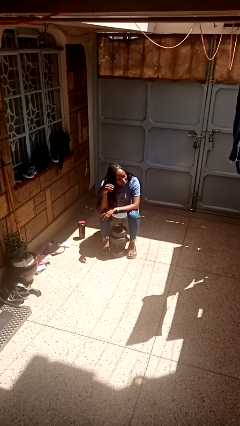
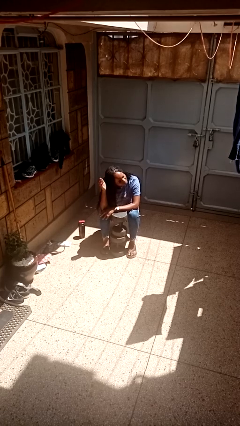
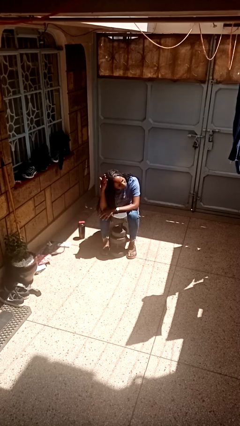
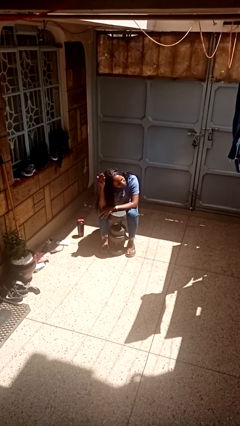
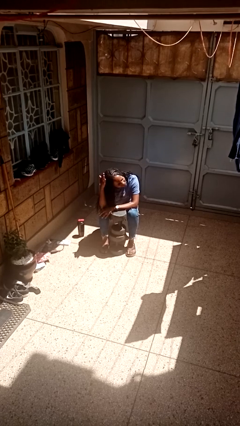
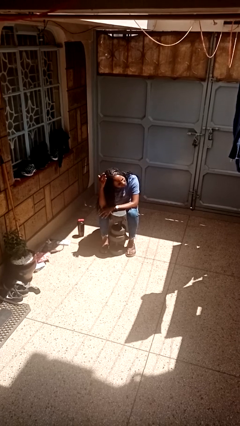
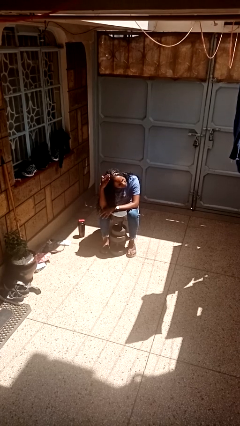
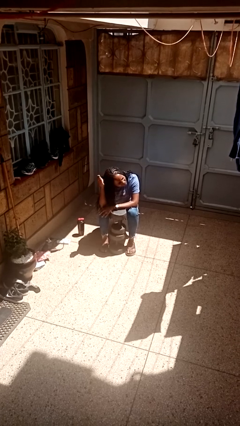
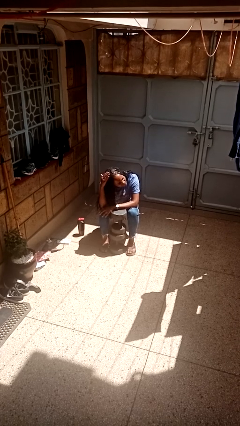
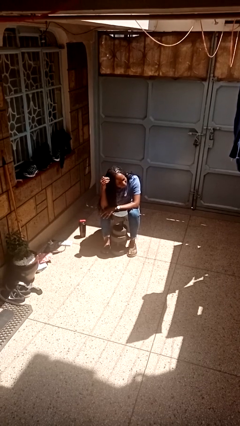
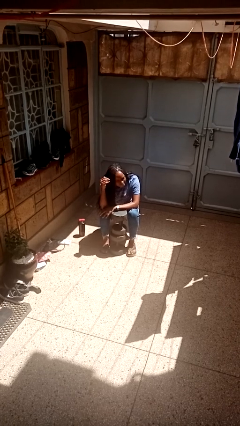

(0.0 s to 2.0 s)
person pats head

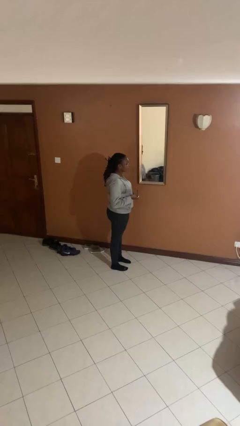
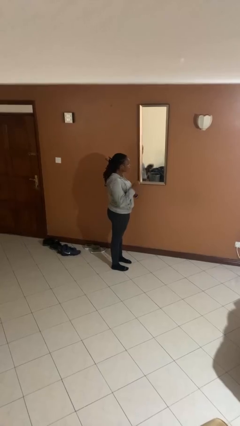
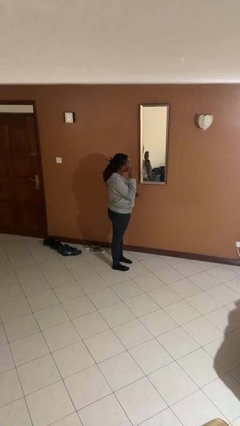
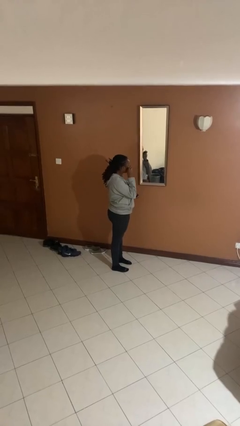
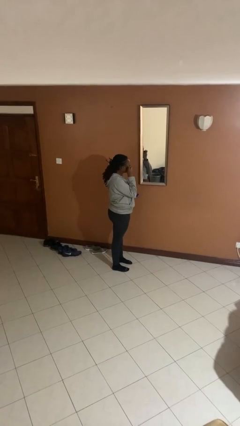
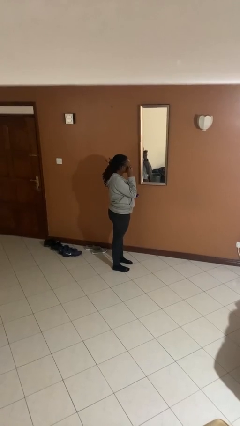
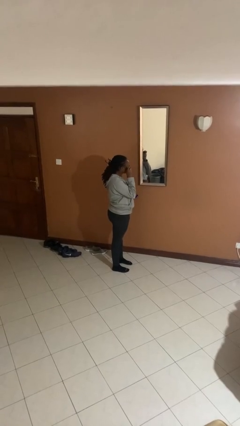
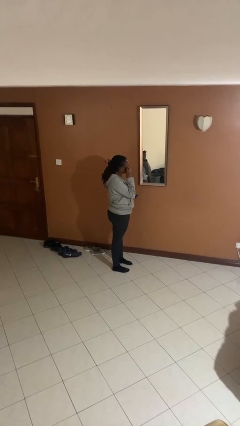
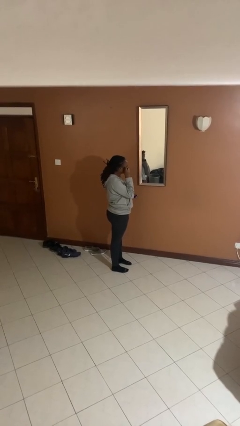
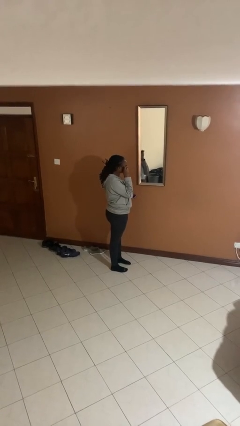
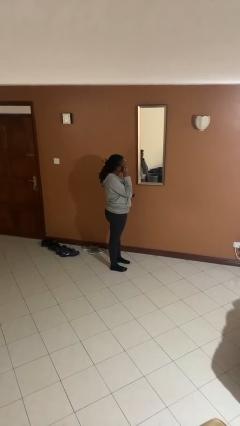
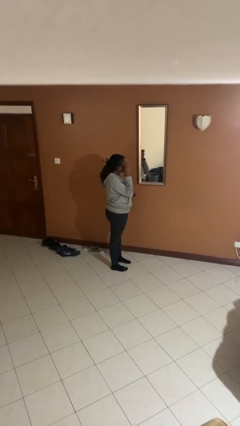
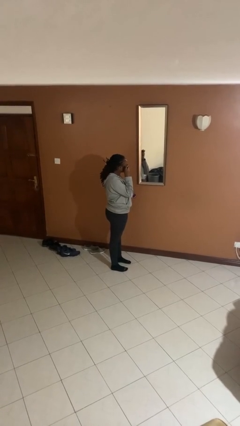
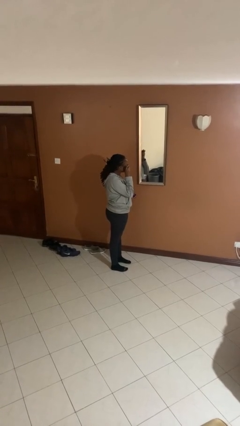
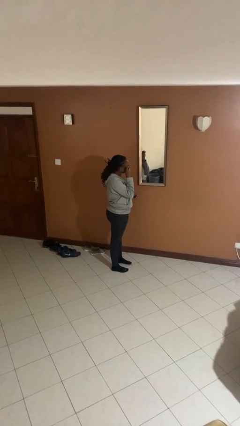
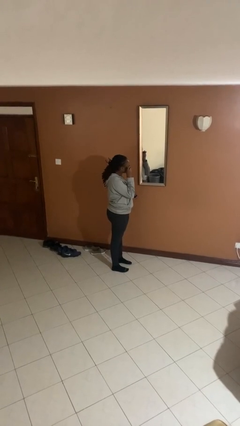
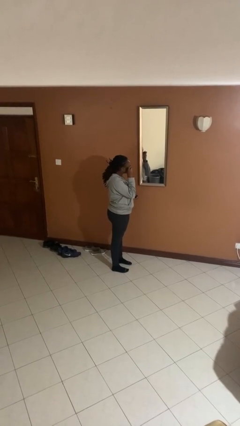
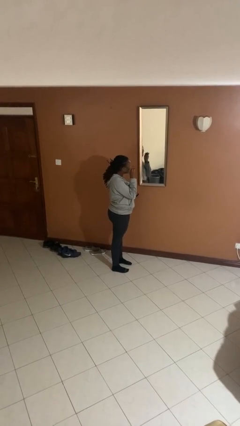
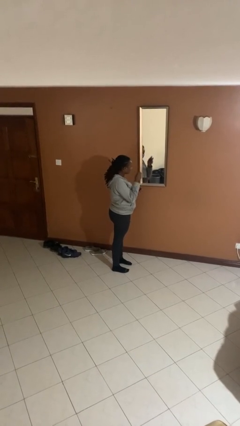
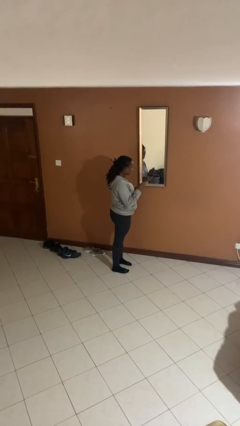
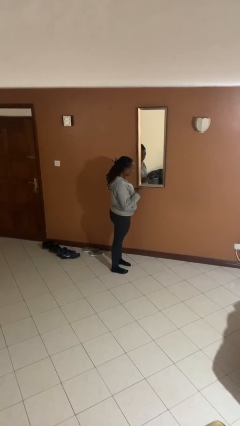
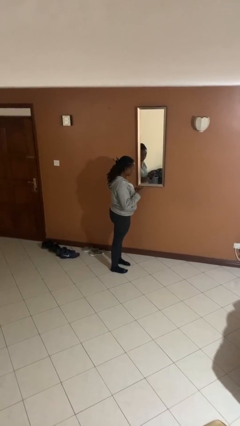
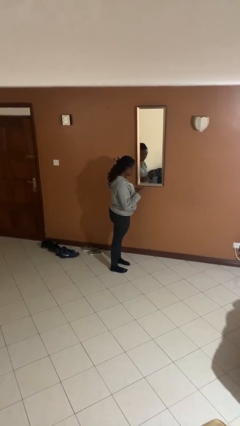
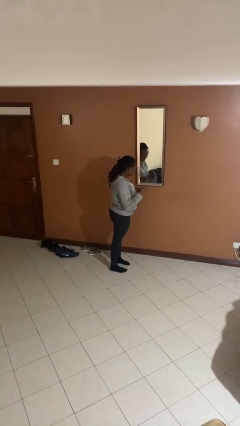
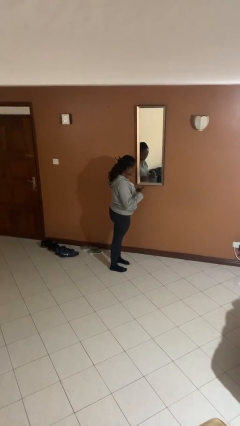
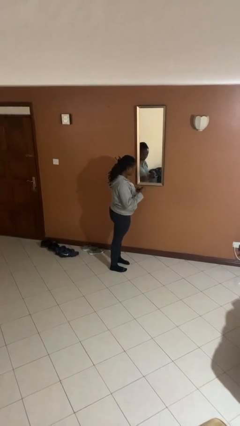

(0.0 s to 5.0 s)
person applies eye makeup

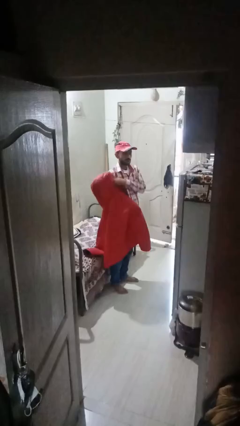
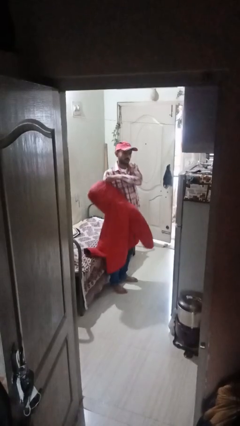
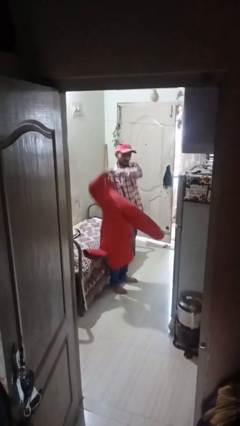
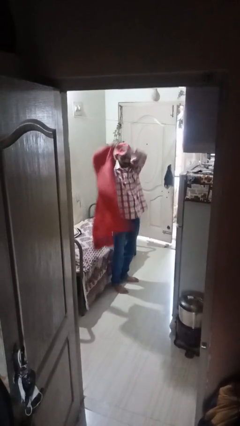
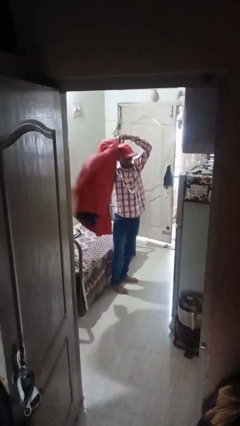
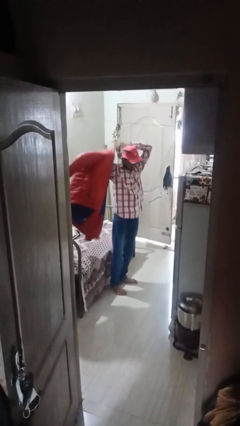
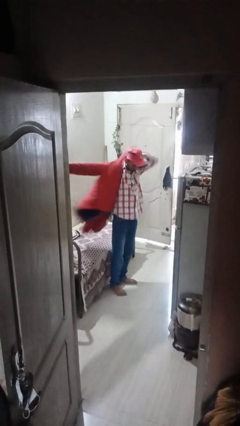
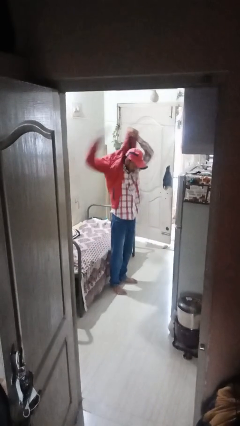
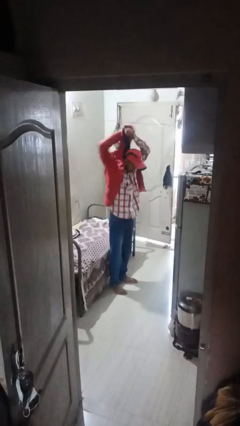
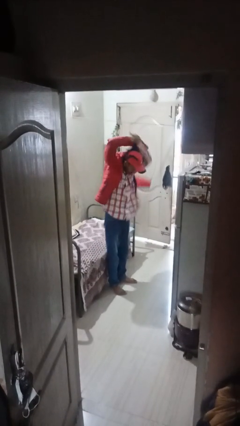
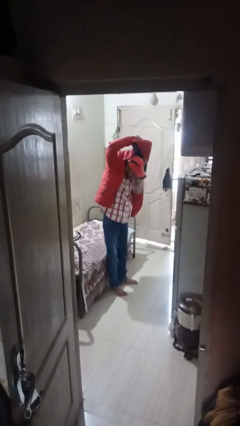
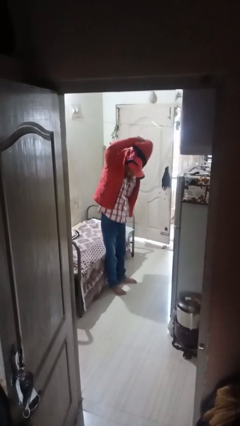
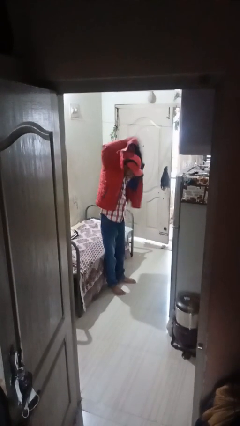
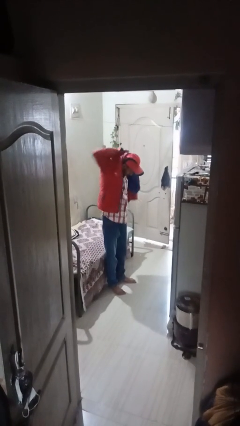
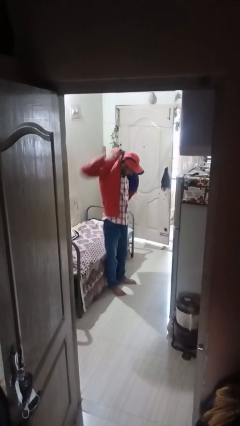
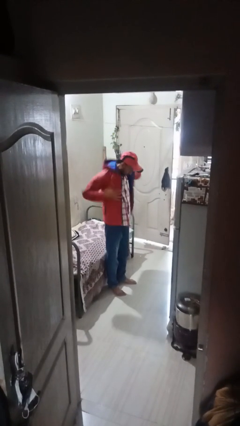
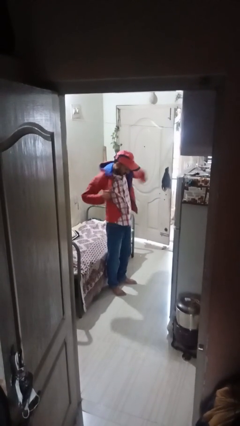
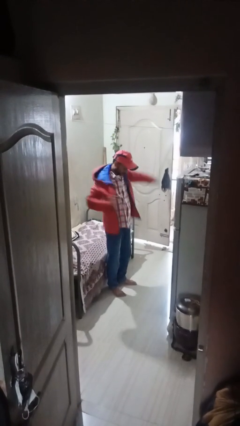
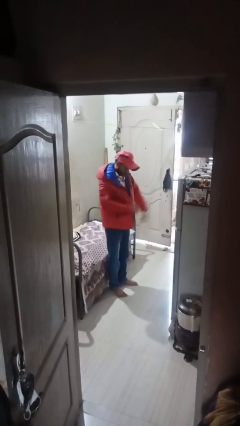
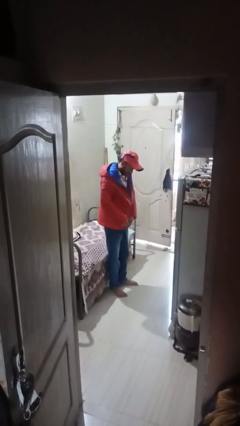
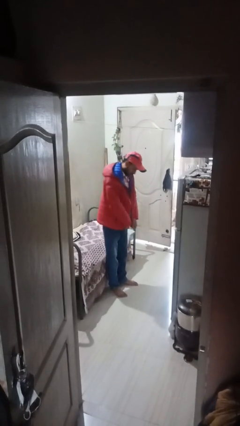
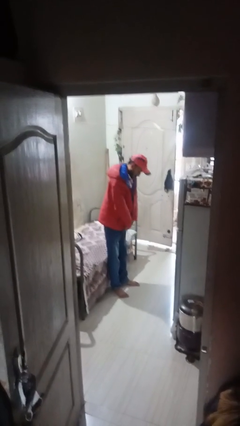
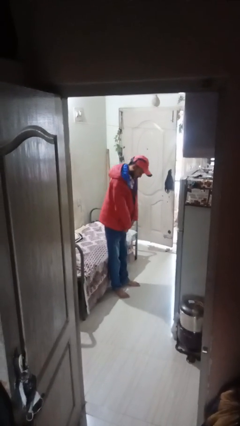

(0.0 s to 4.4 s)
person puts on jacket

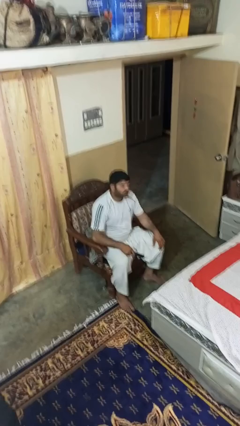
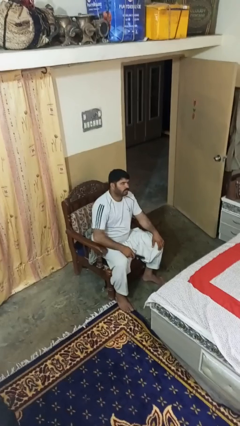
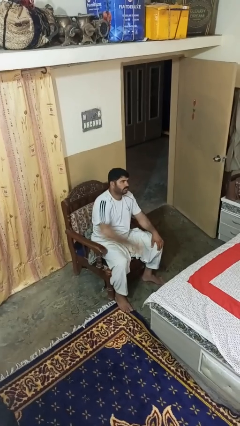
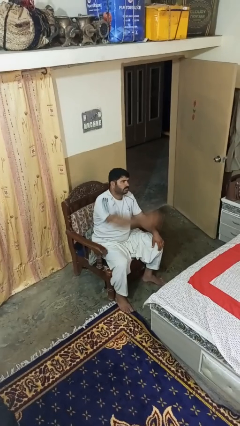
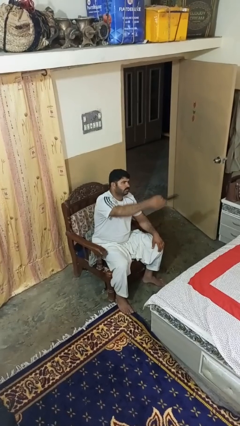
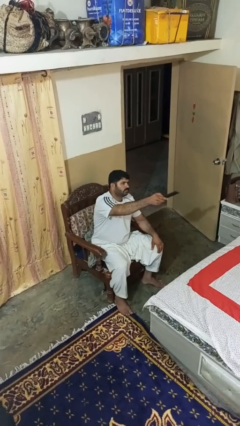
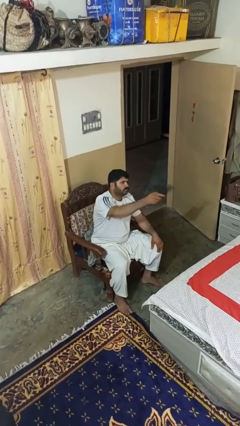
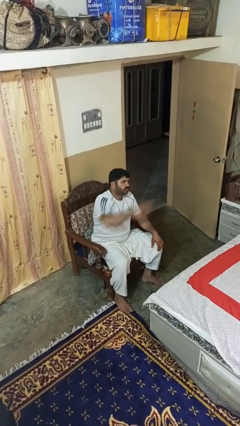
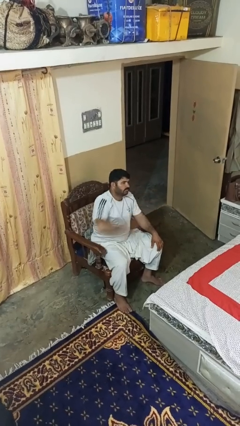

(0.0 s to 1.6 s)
person uses television remote

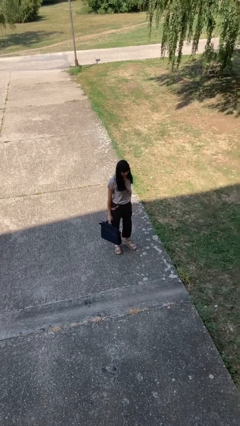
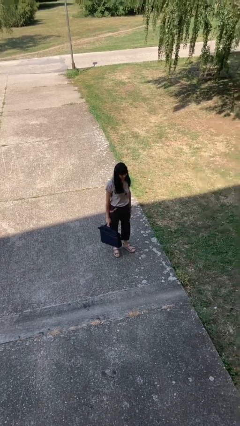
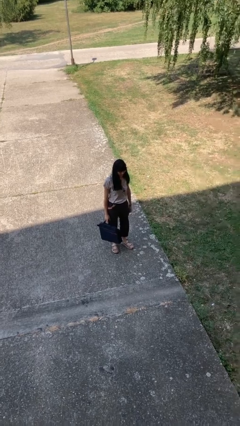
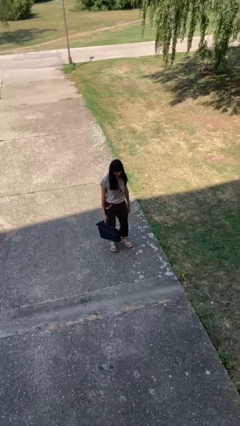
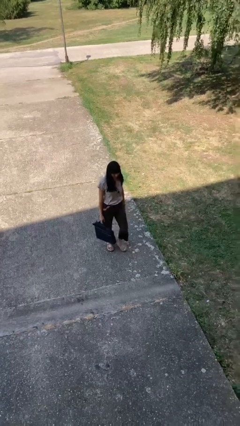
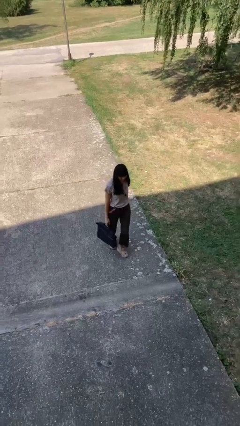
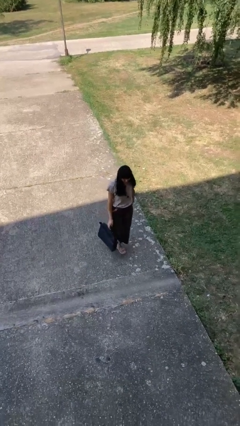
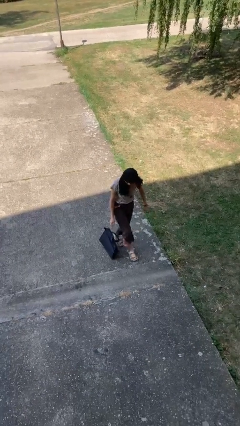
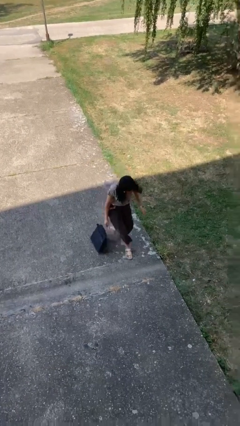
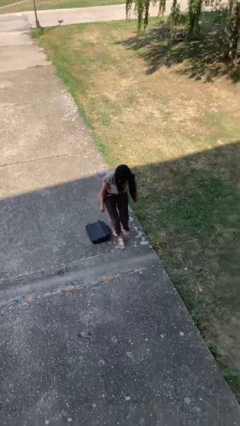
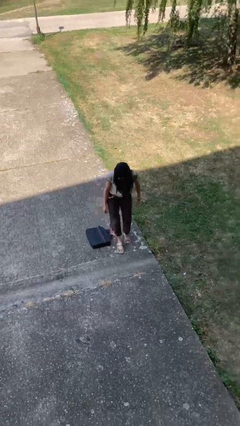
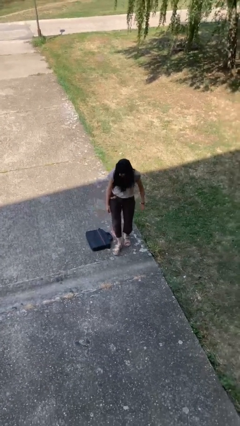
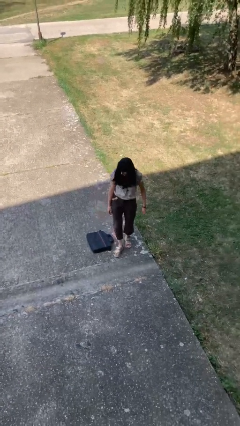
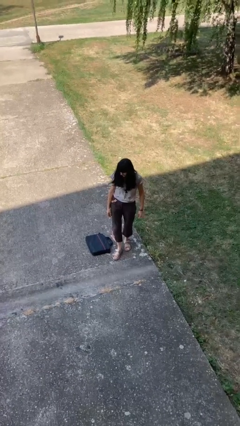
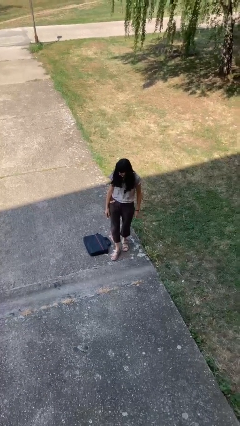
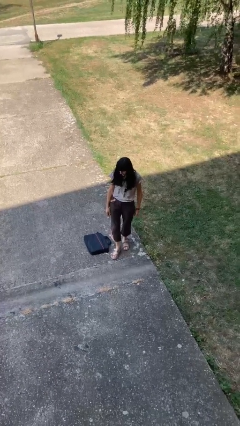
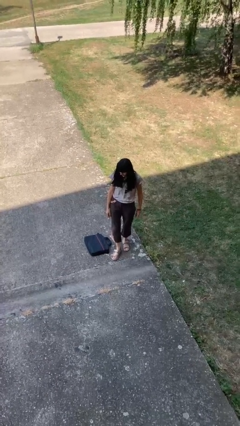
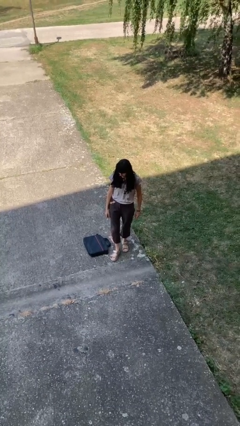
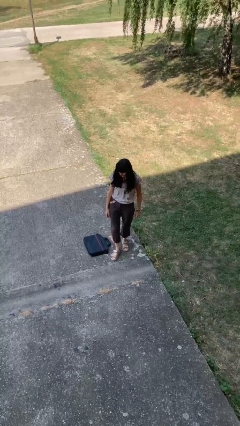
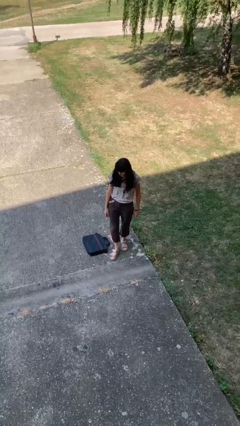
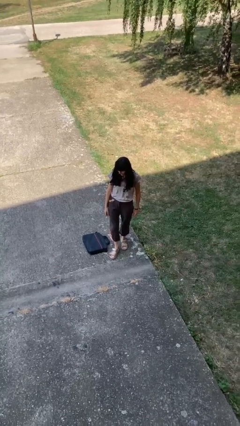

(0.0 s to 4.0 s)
person drops object

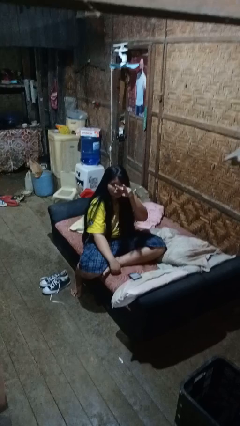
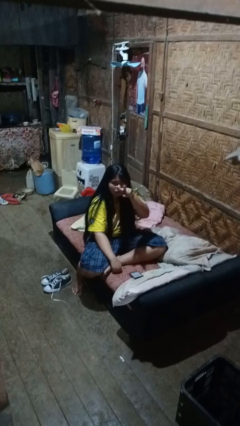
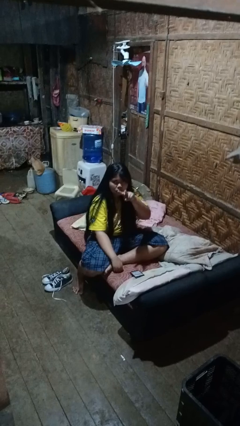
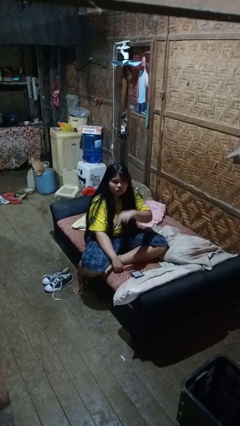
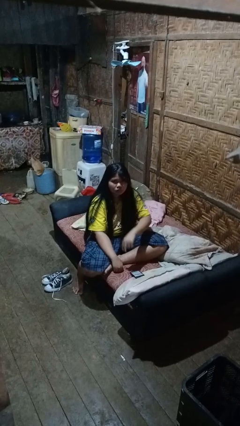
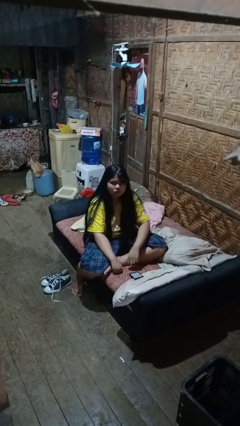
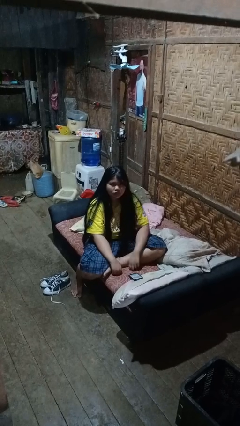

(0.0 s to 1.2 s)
person gestures watch closely
